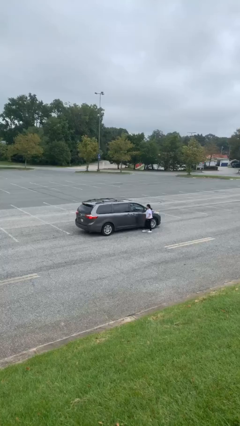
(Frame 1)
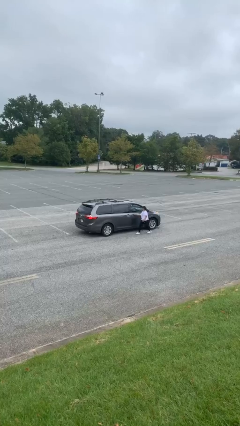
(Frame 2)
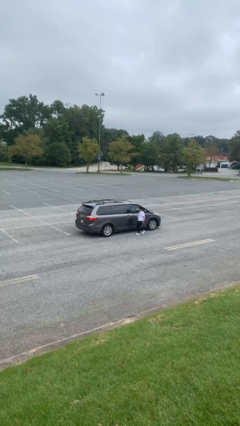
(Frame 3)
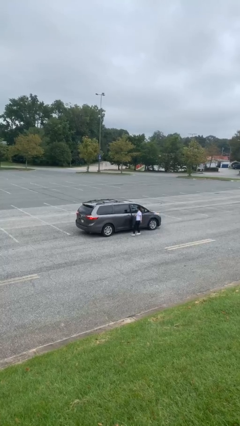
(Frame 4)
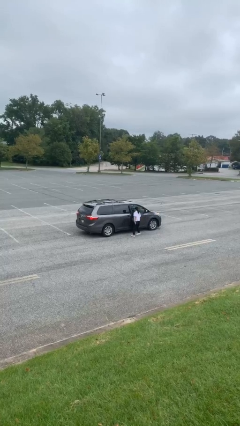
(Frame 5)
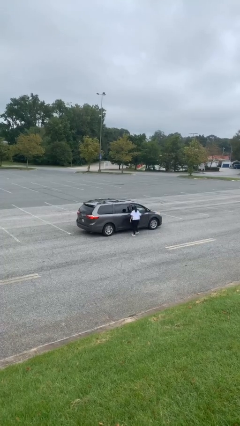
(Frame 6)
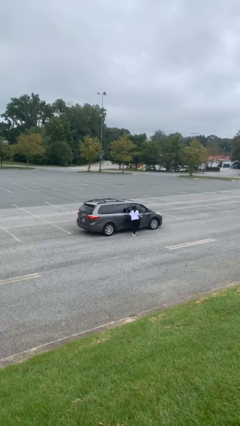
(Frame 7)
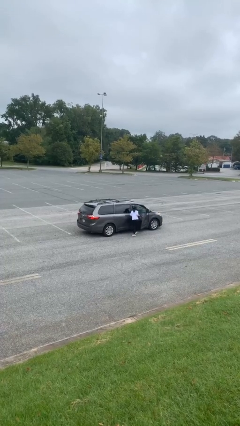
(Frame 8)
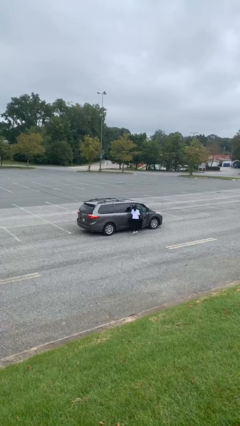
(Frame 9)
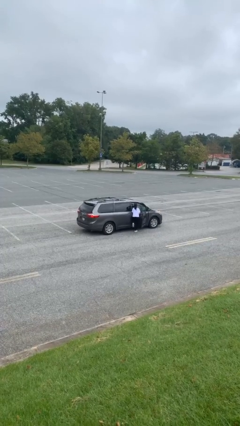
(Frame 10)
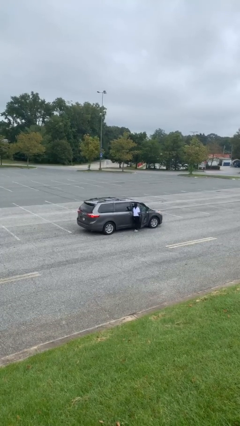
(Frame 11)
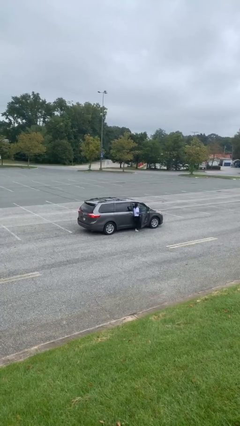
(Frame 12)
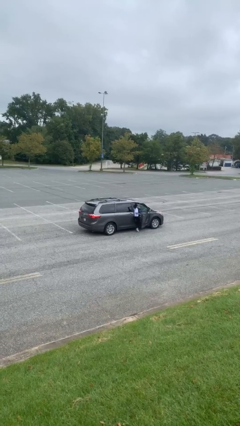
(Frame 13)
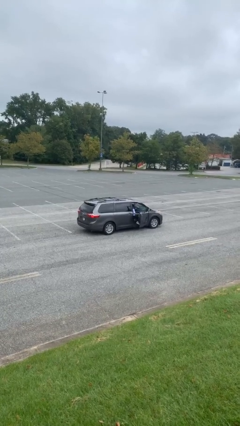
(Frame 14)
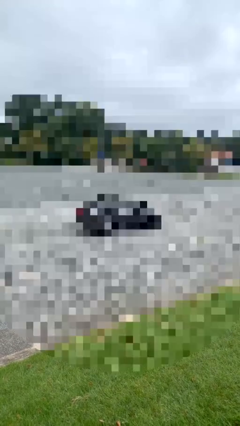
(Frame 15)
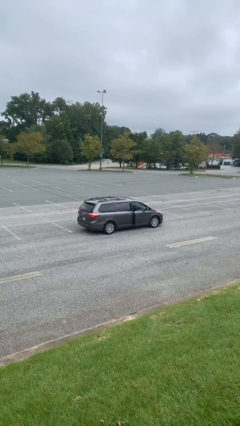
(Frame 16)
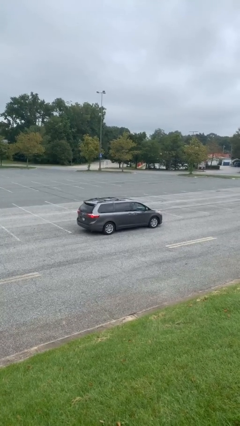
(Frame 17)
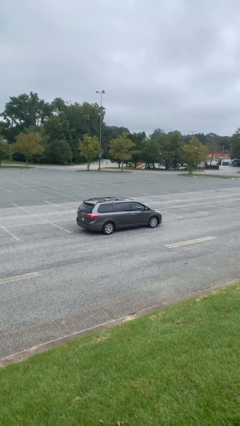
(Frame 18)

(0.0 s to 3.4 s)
car picks up person

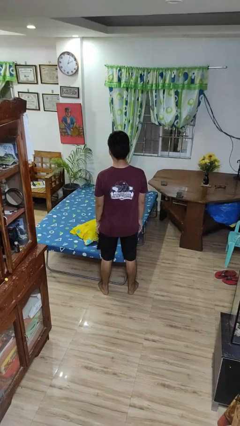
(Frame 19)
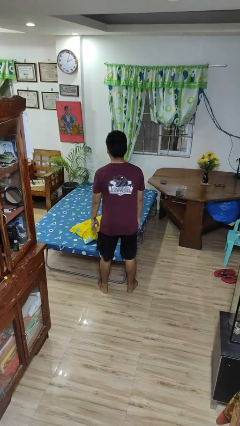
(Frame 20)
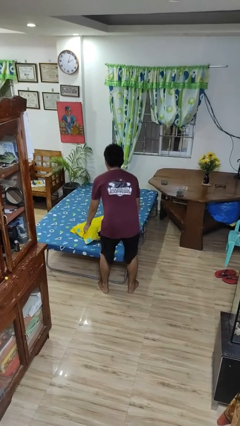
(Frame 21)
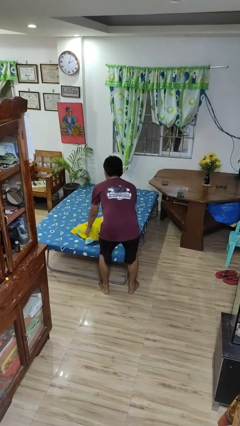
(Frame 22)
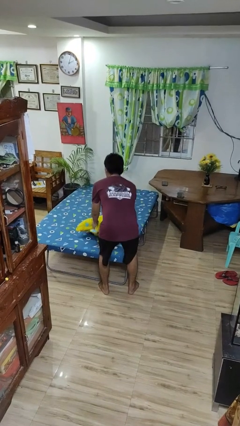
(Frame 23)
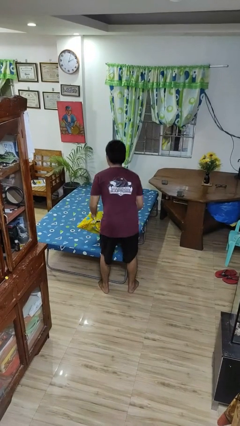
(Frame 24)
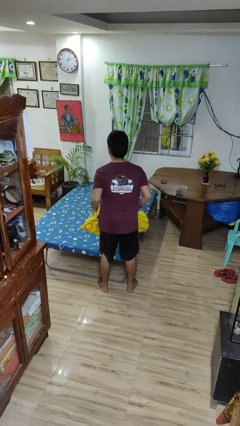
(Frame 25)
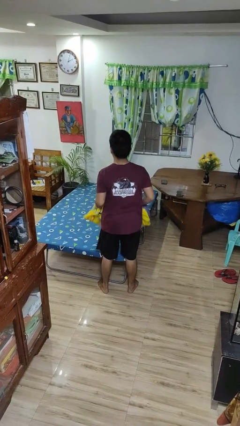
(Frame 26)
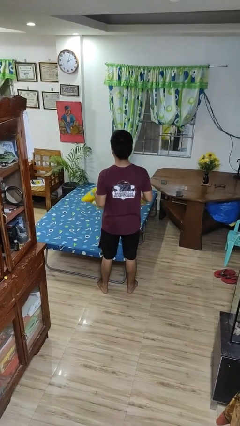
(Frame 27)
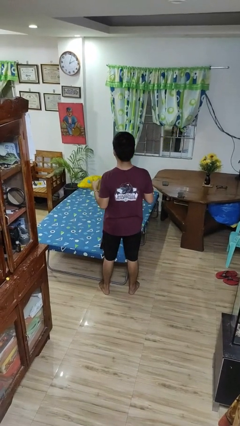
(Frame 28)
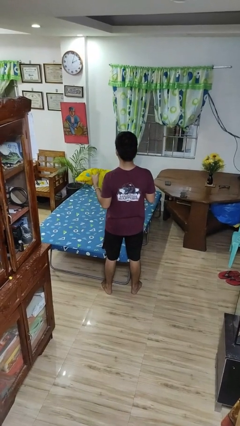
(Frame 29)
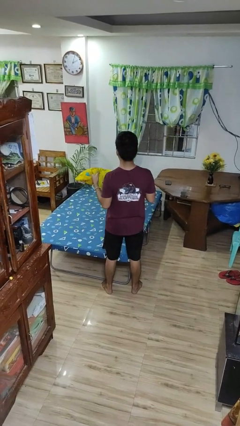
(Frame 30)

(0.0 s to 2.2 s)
person picks up object from bed

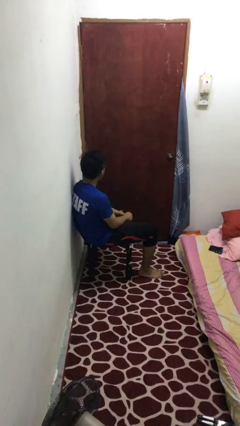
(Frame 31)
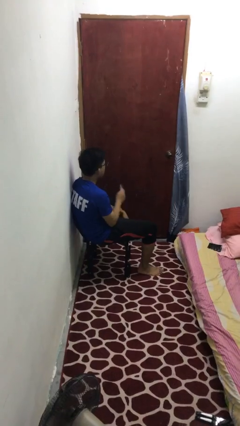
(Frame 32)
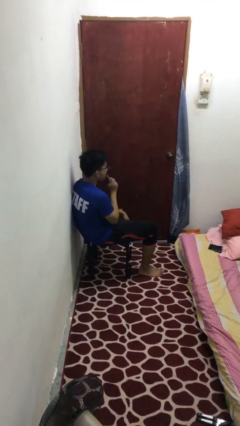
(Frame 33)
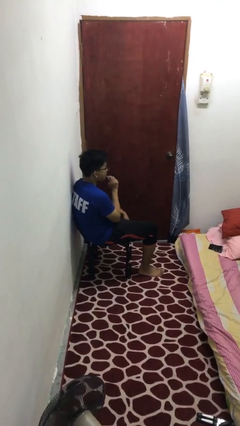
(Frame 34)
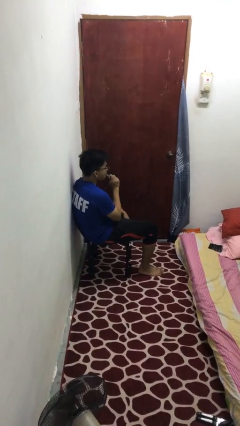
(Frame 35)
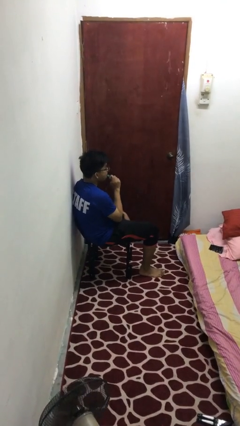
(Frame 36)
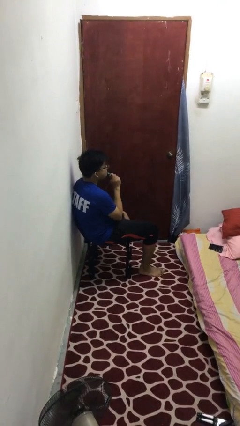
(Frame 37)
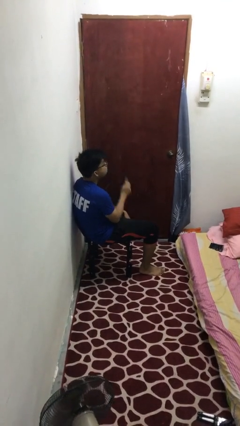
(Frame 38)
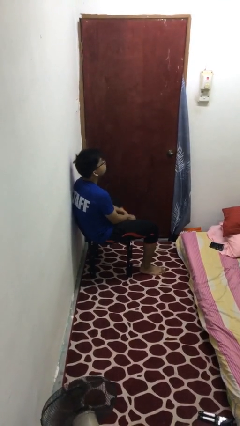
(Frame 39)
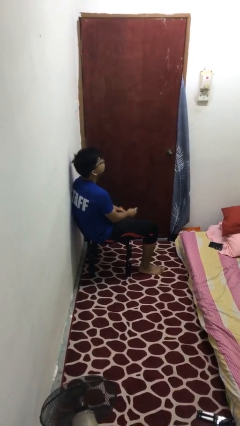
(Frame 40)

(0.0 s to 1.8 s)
person vapes

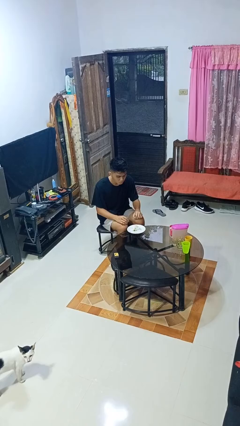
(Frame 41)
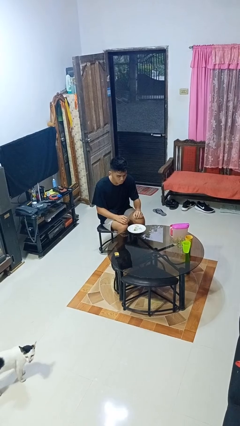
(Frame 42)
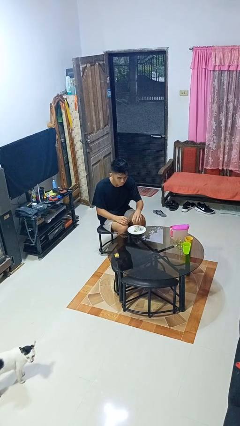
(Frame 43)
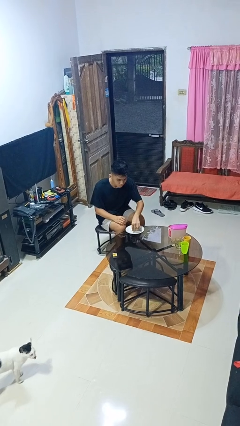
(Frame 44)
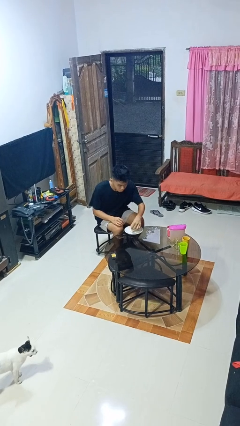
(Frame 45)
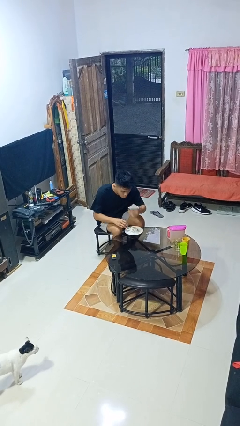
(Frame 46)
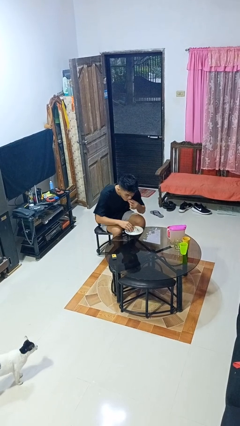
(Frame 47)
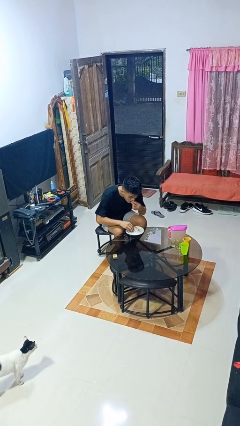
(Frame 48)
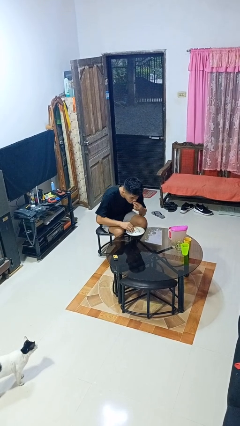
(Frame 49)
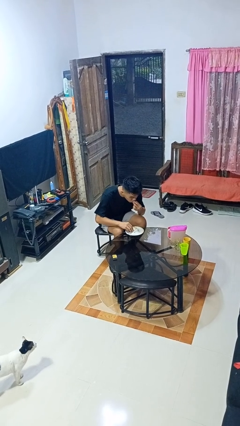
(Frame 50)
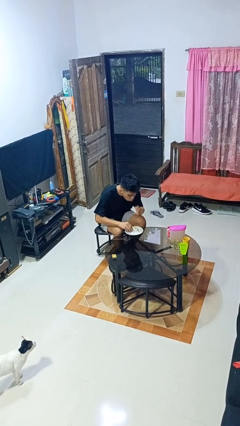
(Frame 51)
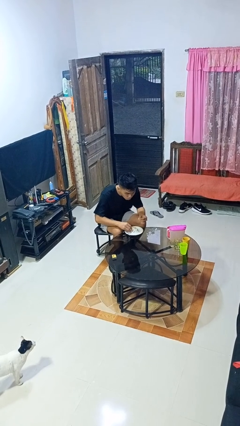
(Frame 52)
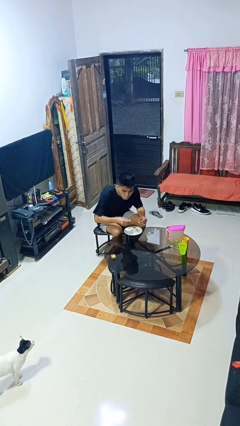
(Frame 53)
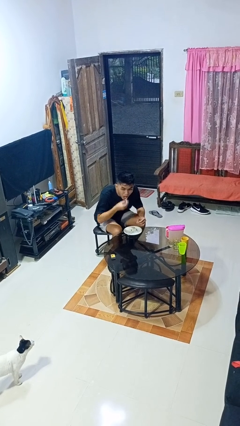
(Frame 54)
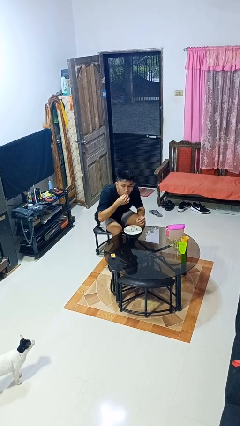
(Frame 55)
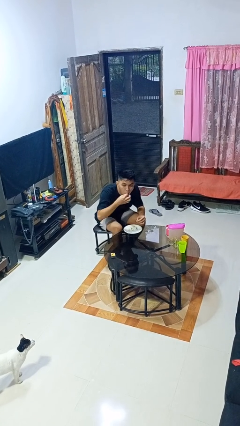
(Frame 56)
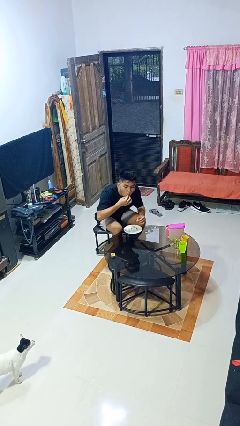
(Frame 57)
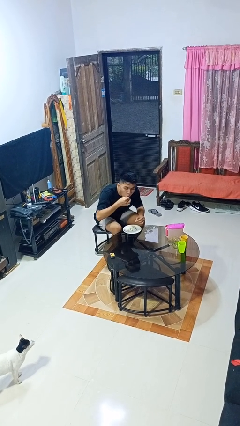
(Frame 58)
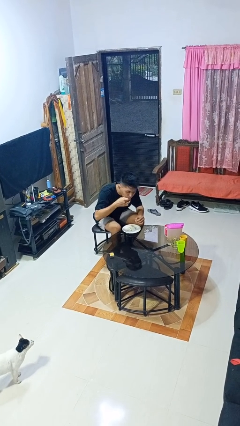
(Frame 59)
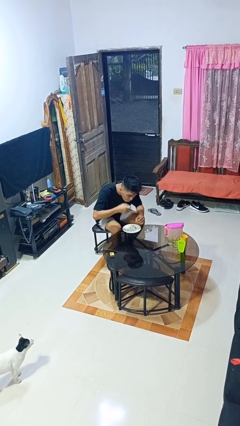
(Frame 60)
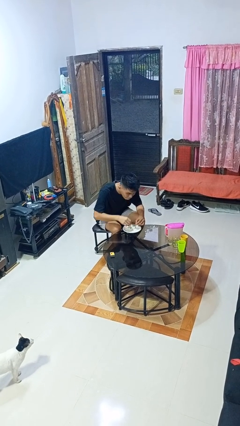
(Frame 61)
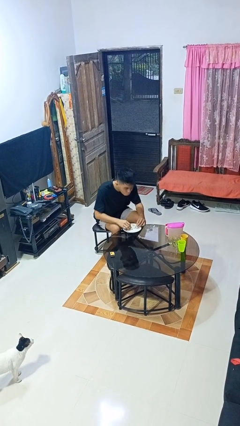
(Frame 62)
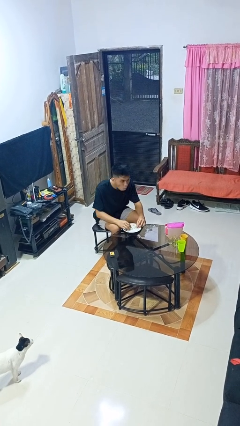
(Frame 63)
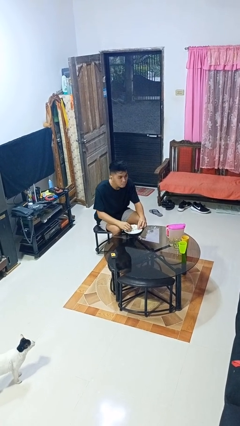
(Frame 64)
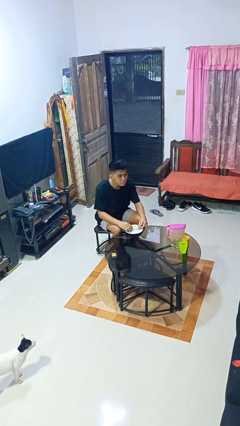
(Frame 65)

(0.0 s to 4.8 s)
person eats with hands

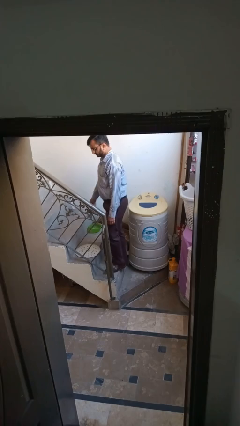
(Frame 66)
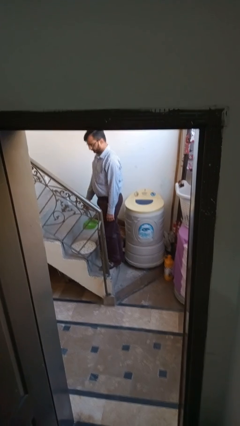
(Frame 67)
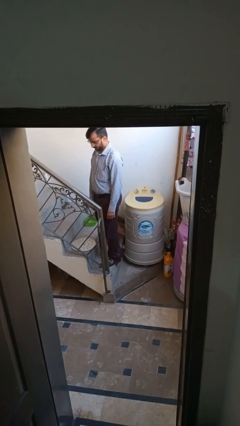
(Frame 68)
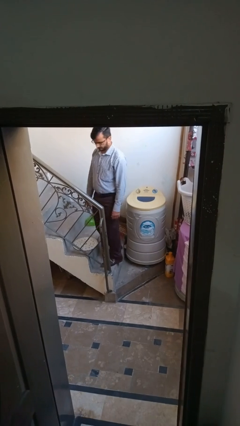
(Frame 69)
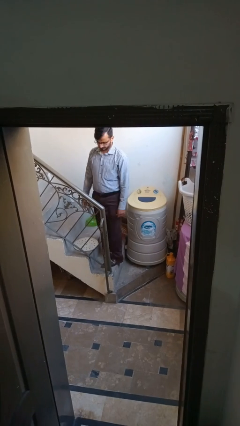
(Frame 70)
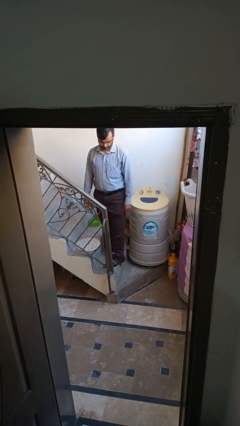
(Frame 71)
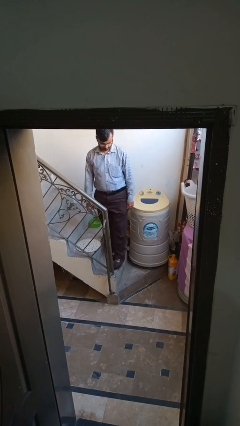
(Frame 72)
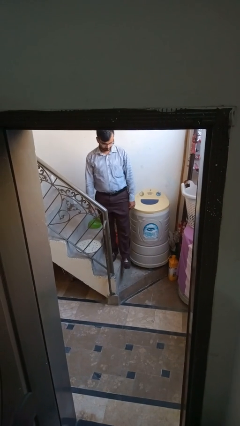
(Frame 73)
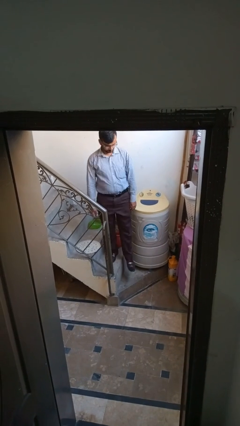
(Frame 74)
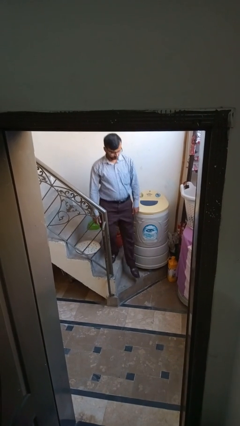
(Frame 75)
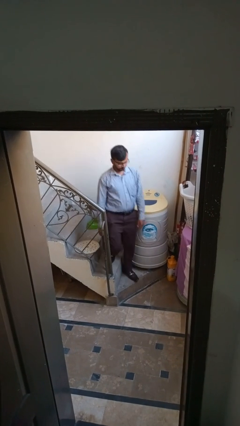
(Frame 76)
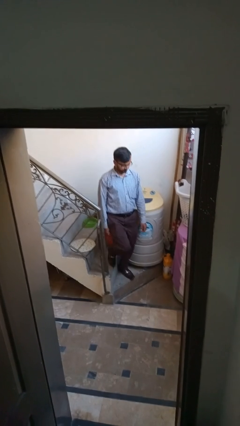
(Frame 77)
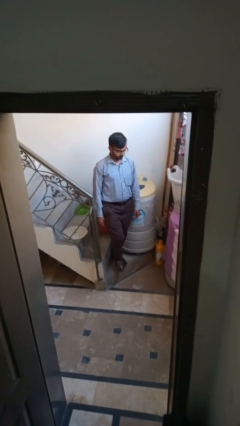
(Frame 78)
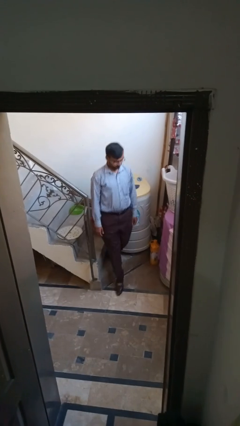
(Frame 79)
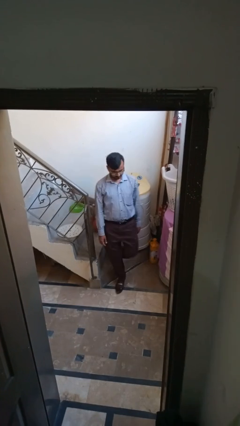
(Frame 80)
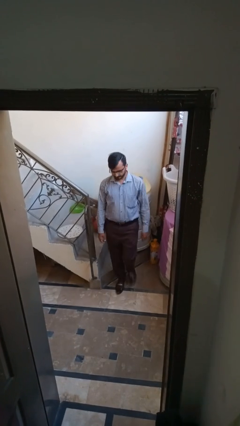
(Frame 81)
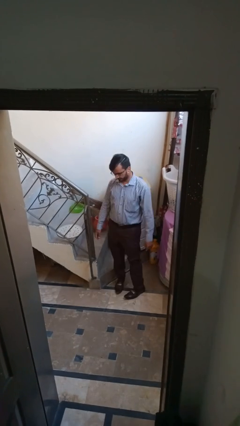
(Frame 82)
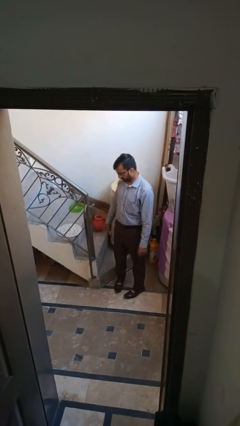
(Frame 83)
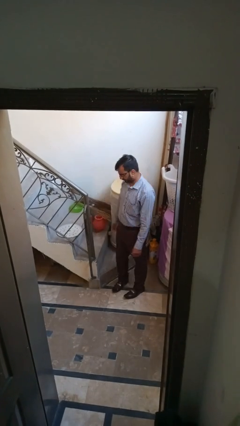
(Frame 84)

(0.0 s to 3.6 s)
person climbs down stairs

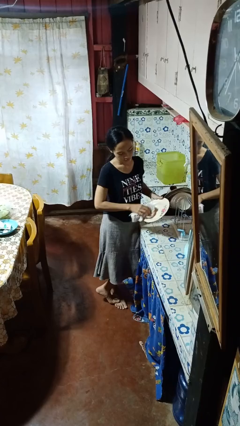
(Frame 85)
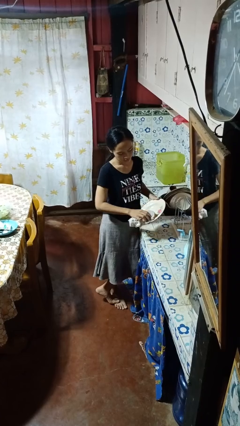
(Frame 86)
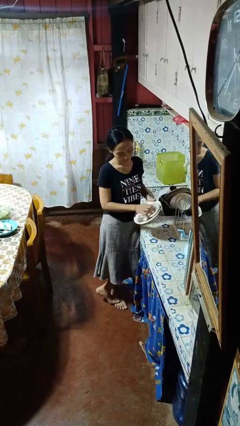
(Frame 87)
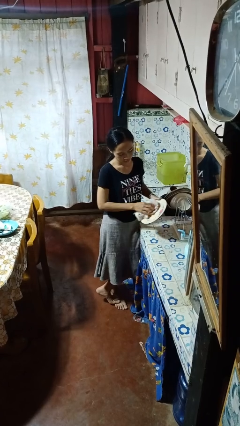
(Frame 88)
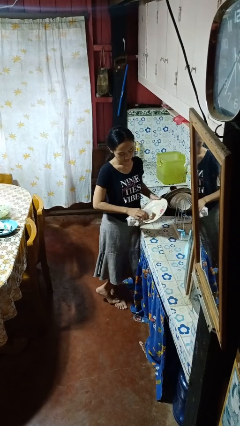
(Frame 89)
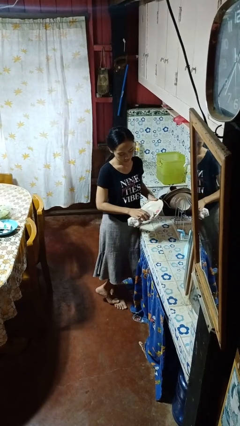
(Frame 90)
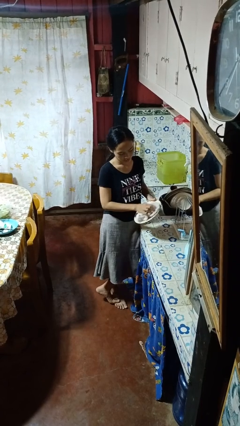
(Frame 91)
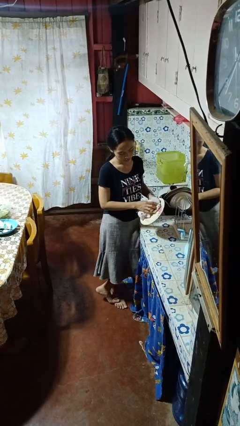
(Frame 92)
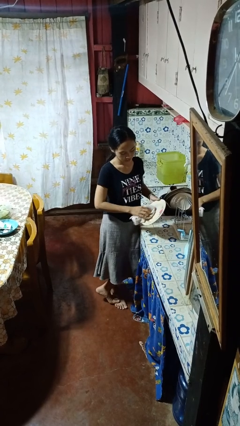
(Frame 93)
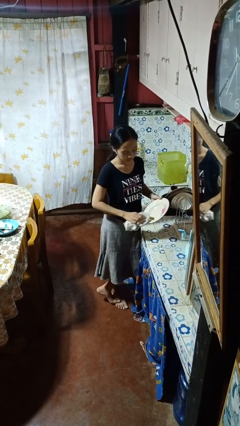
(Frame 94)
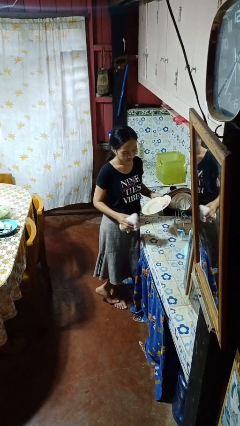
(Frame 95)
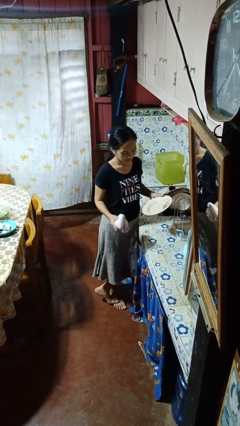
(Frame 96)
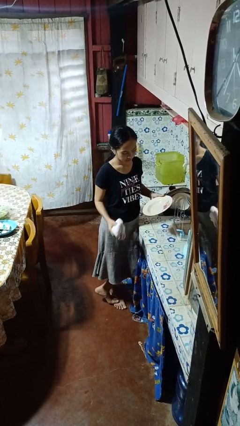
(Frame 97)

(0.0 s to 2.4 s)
person dries dish
